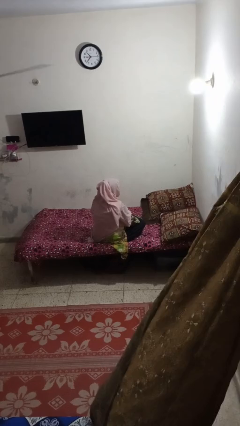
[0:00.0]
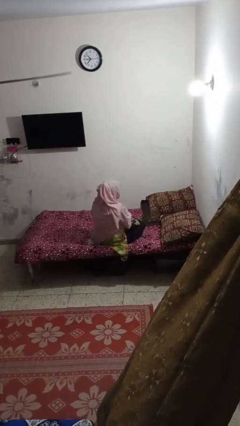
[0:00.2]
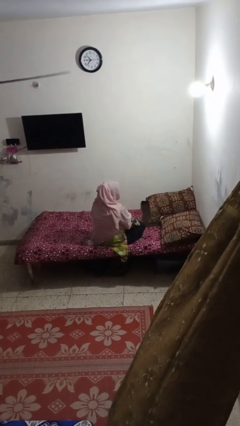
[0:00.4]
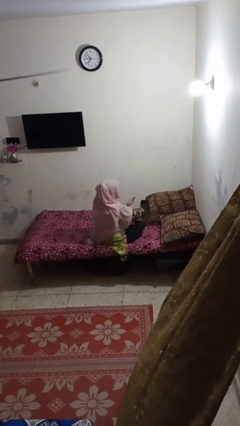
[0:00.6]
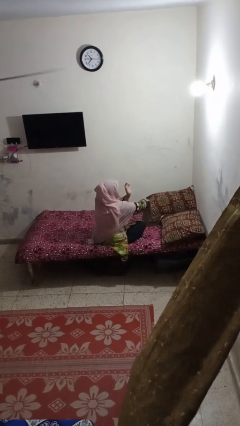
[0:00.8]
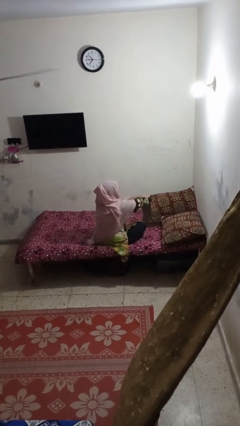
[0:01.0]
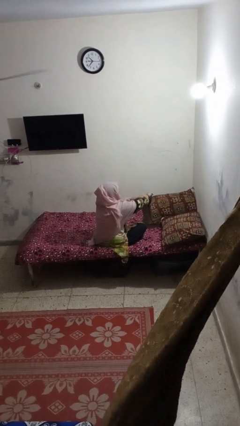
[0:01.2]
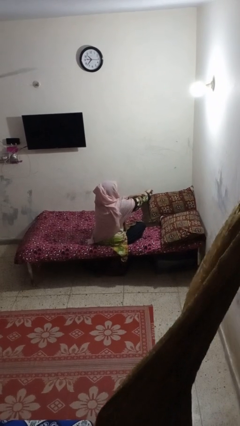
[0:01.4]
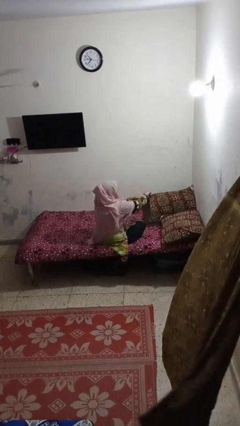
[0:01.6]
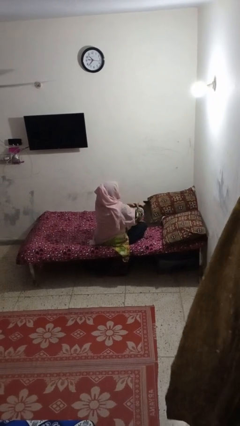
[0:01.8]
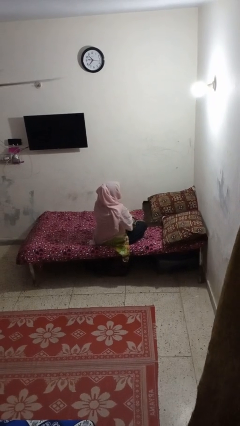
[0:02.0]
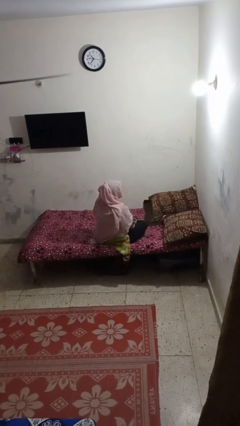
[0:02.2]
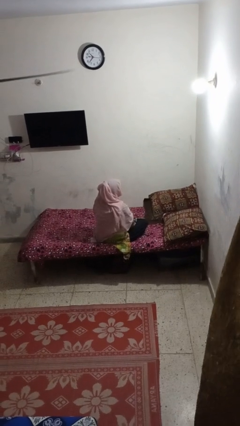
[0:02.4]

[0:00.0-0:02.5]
person swats bug

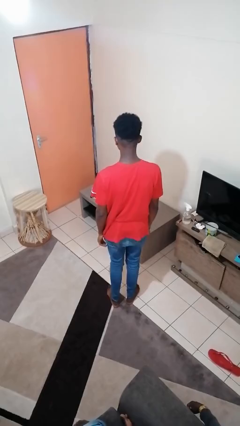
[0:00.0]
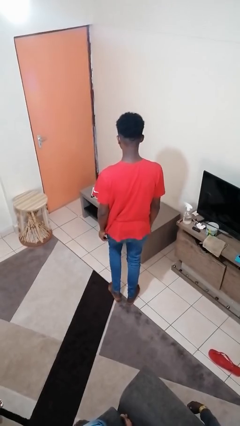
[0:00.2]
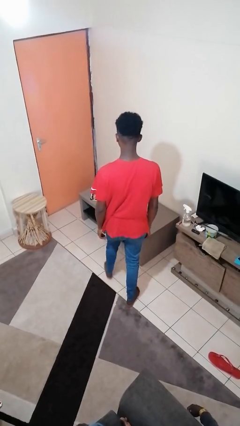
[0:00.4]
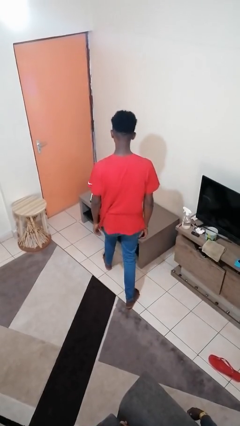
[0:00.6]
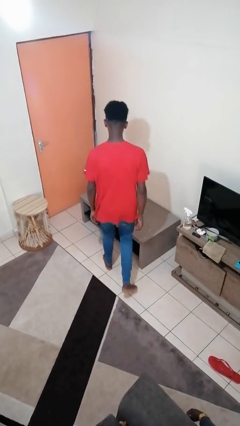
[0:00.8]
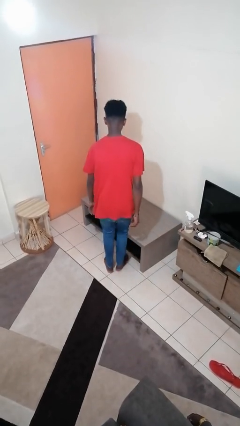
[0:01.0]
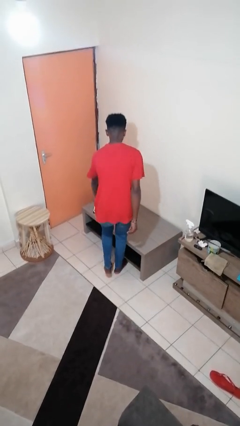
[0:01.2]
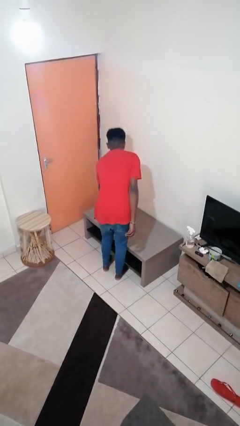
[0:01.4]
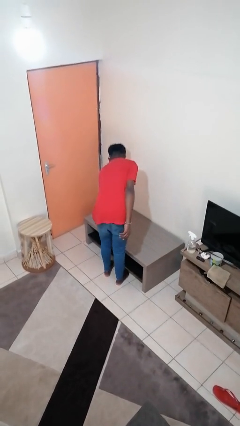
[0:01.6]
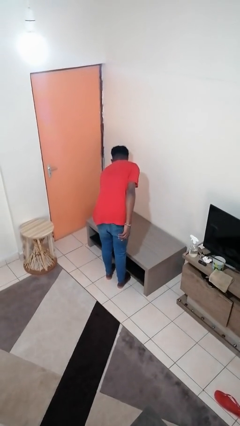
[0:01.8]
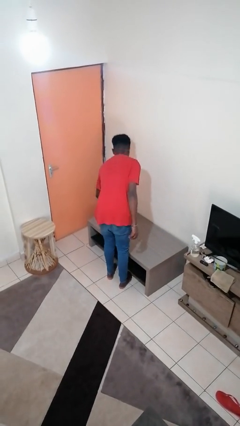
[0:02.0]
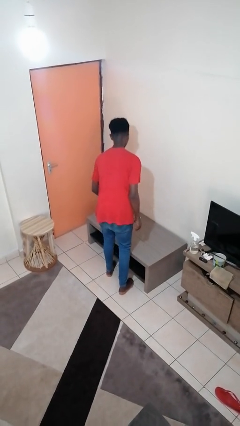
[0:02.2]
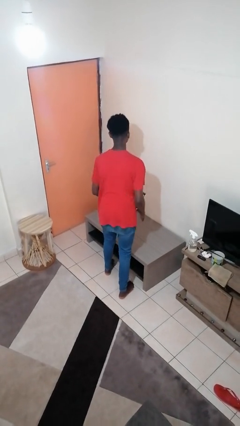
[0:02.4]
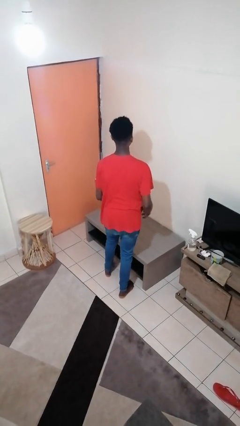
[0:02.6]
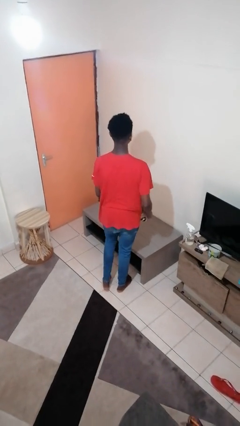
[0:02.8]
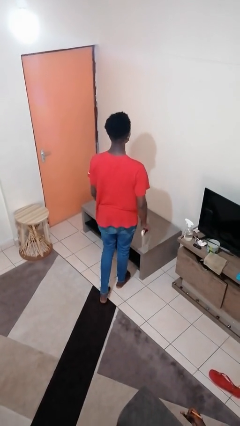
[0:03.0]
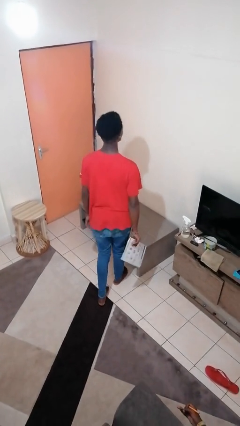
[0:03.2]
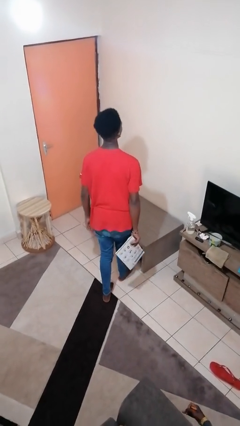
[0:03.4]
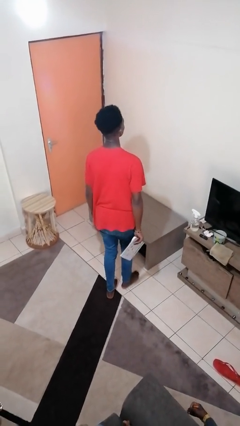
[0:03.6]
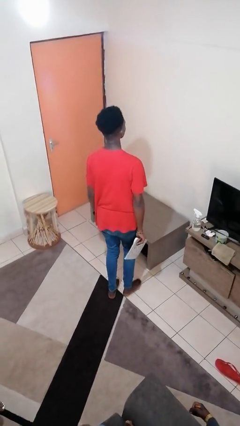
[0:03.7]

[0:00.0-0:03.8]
person picks up object from table

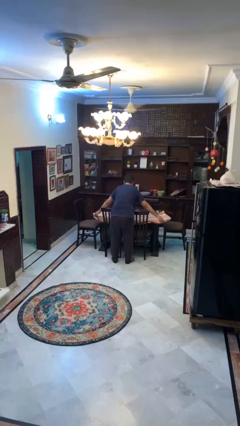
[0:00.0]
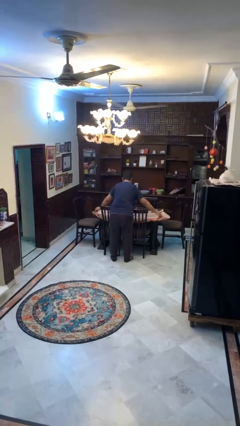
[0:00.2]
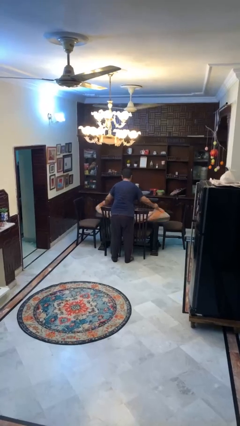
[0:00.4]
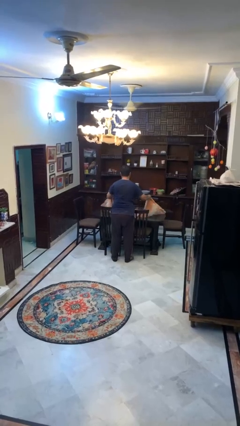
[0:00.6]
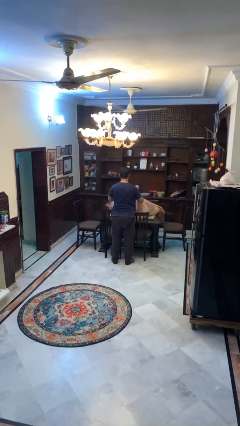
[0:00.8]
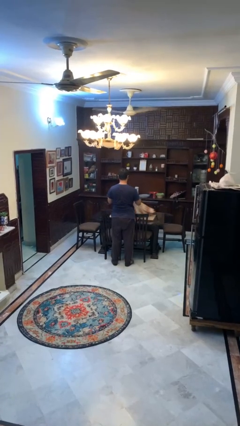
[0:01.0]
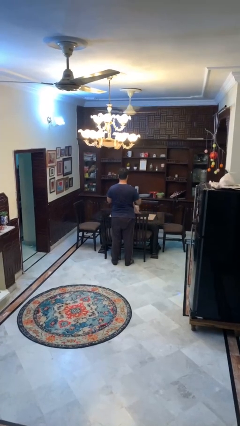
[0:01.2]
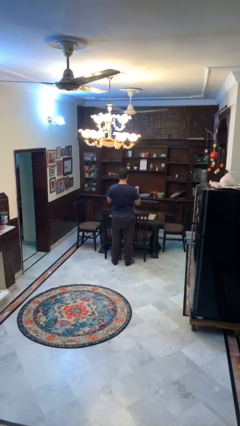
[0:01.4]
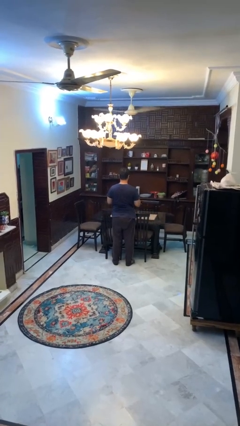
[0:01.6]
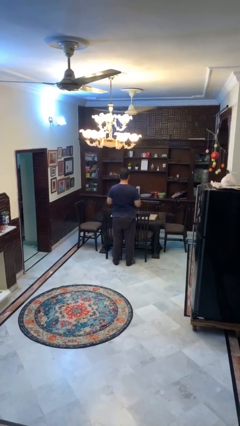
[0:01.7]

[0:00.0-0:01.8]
person folds tablecloth

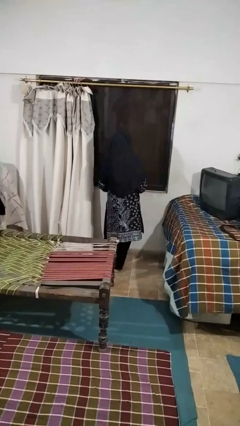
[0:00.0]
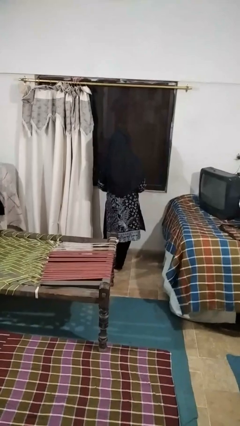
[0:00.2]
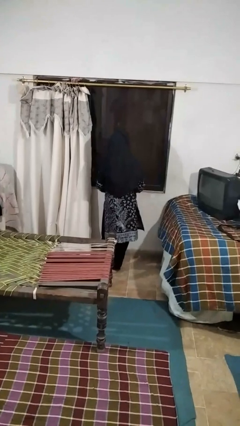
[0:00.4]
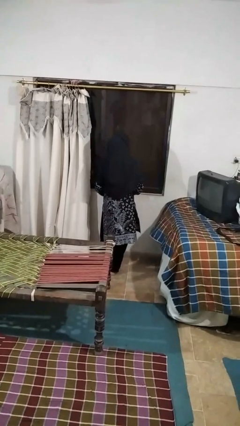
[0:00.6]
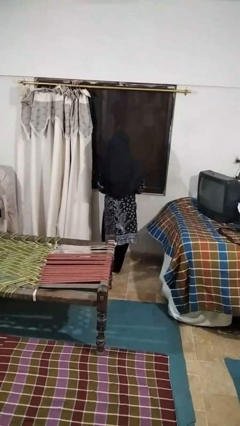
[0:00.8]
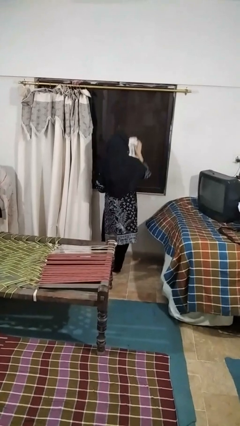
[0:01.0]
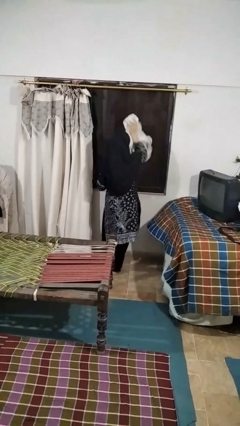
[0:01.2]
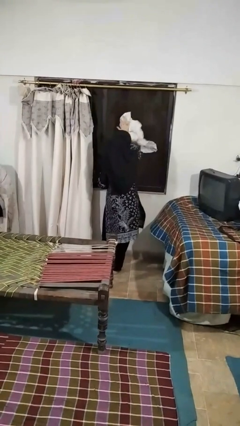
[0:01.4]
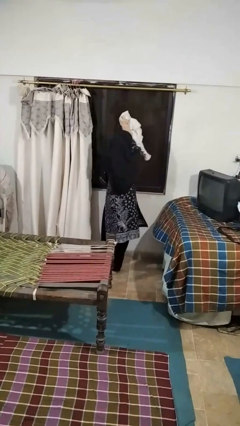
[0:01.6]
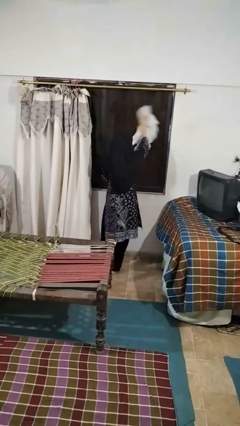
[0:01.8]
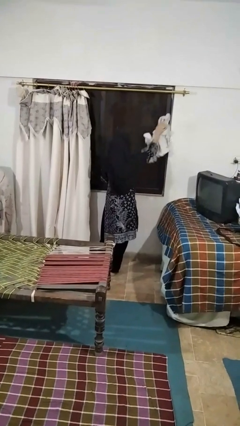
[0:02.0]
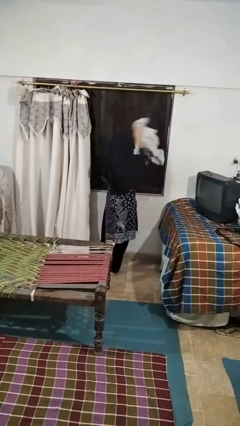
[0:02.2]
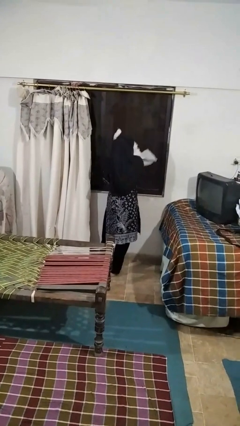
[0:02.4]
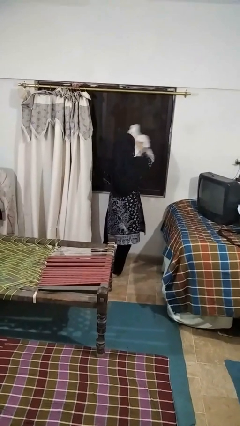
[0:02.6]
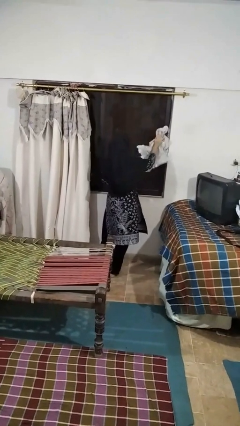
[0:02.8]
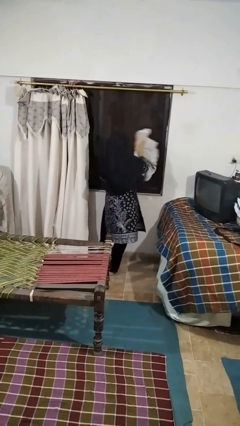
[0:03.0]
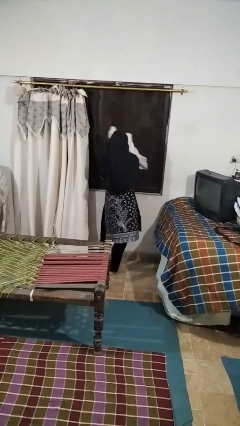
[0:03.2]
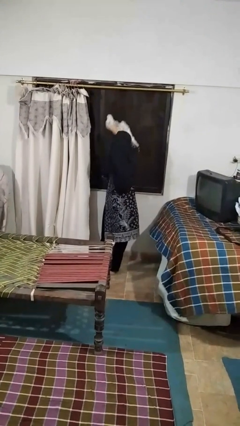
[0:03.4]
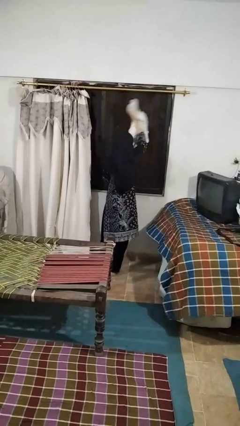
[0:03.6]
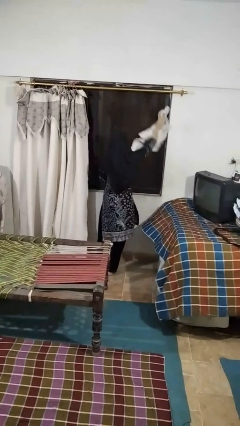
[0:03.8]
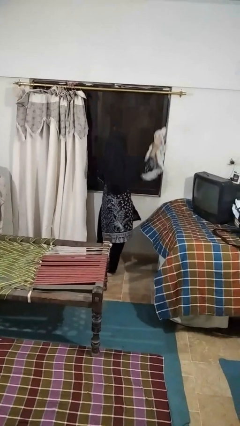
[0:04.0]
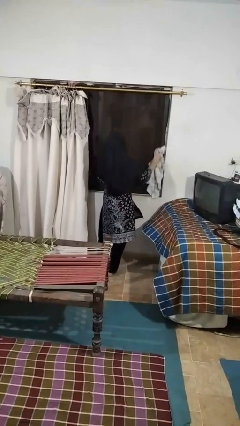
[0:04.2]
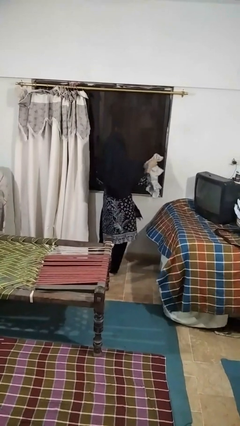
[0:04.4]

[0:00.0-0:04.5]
person washes window

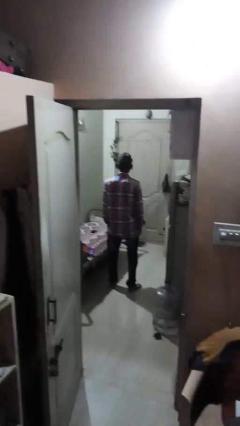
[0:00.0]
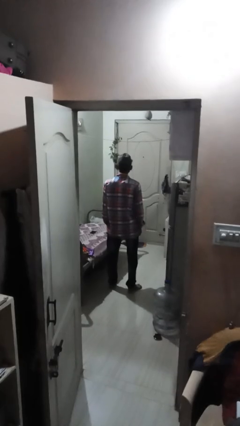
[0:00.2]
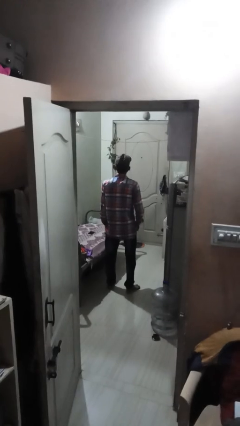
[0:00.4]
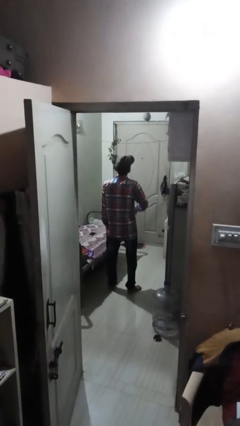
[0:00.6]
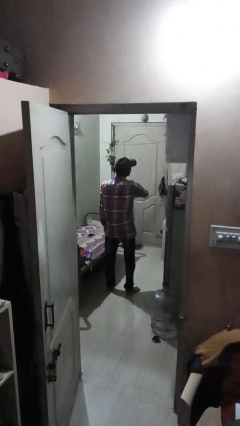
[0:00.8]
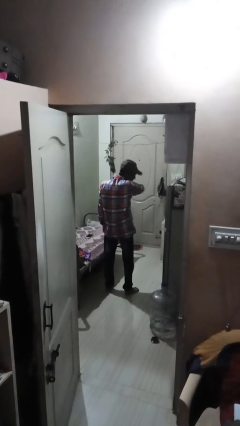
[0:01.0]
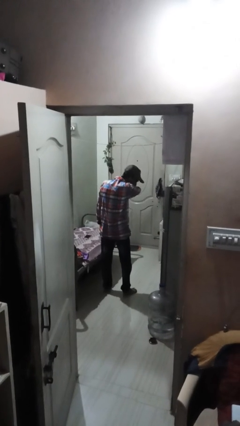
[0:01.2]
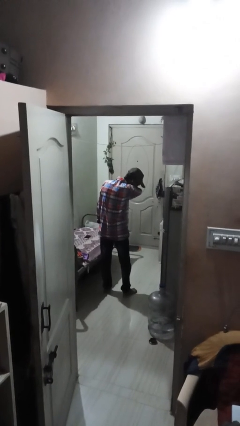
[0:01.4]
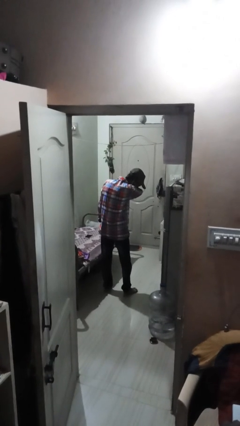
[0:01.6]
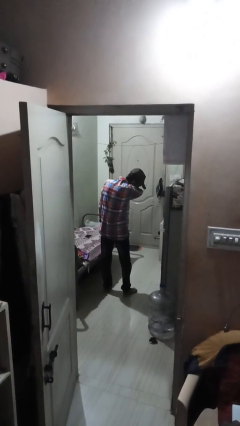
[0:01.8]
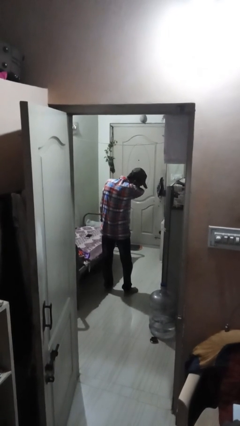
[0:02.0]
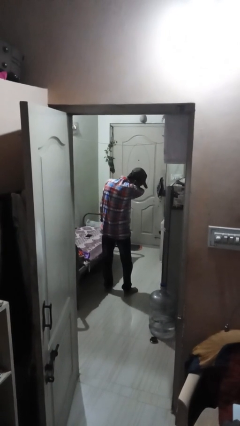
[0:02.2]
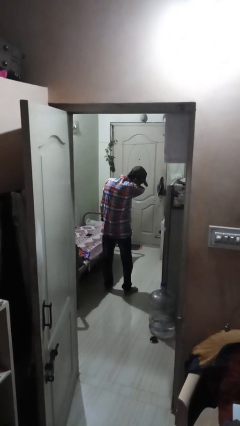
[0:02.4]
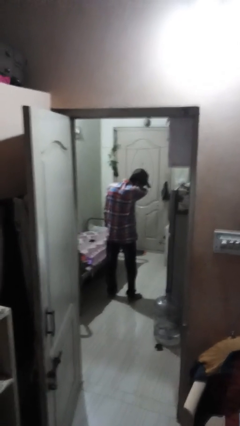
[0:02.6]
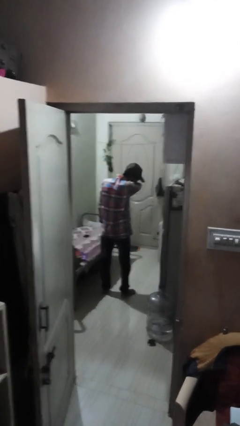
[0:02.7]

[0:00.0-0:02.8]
person sneezes into arm

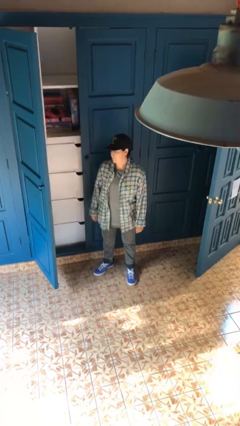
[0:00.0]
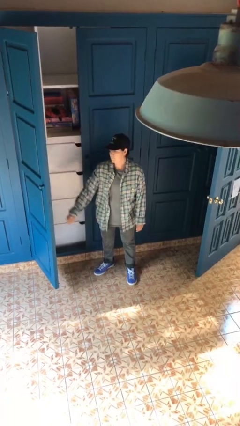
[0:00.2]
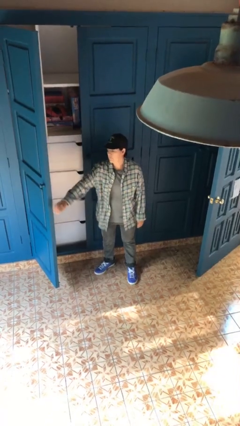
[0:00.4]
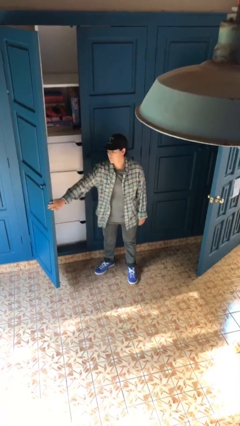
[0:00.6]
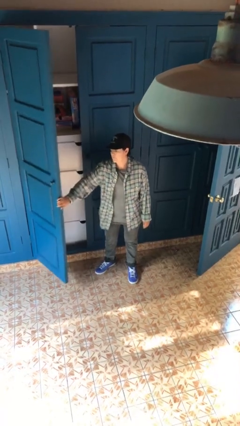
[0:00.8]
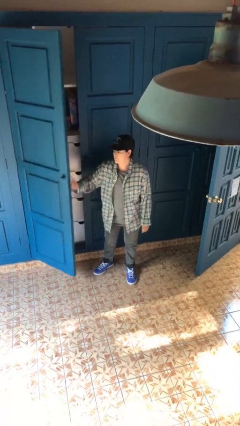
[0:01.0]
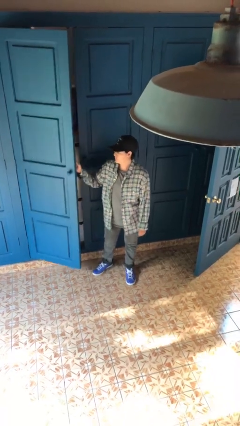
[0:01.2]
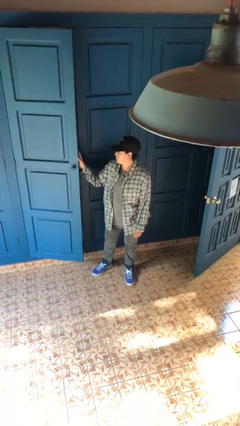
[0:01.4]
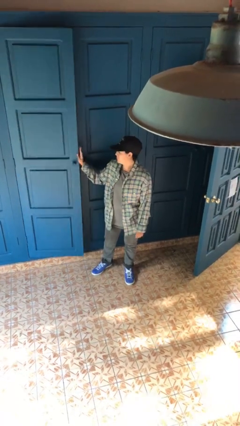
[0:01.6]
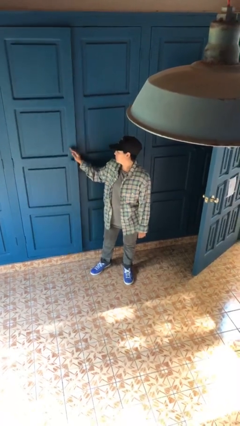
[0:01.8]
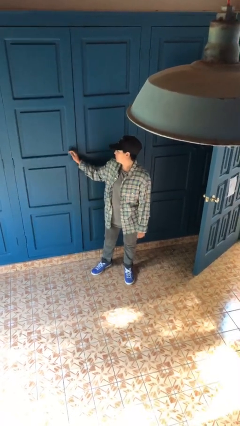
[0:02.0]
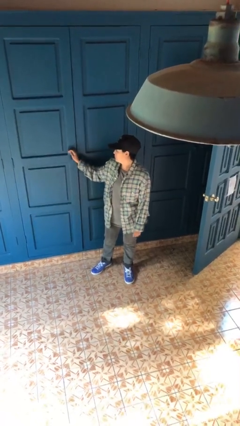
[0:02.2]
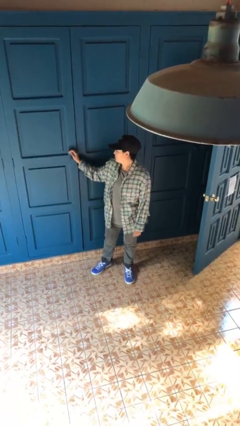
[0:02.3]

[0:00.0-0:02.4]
person closes closet door
